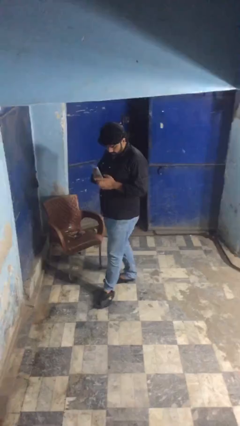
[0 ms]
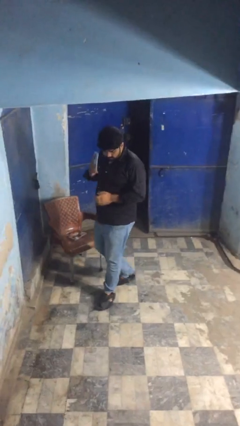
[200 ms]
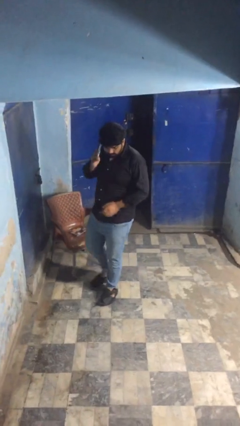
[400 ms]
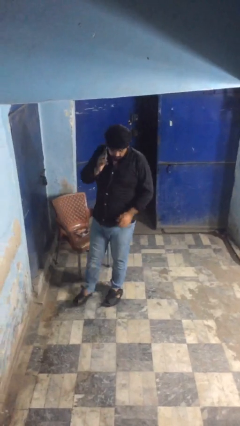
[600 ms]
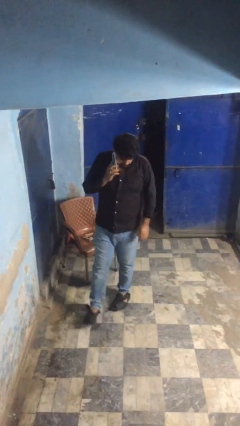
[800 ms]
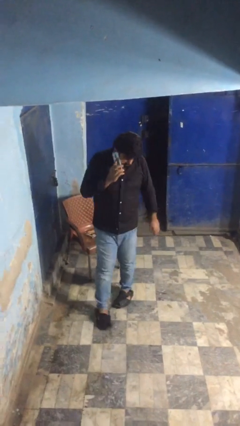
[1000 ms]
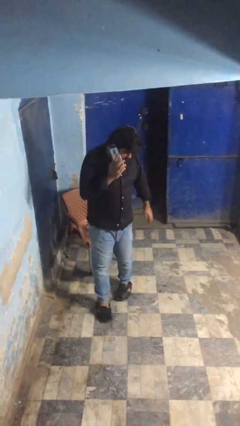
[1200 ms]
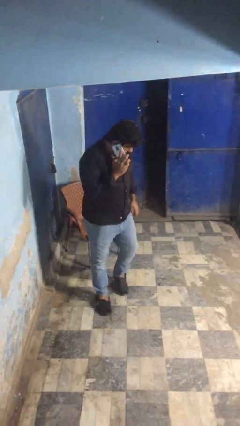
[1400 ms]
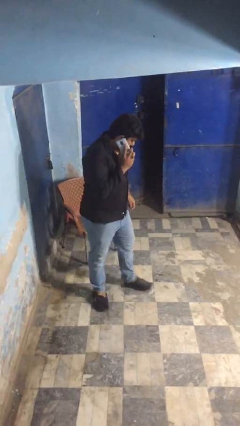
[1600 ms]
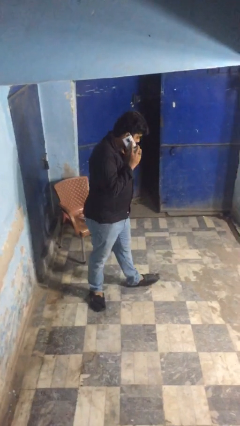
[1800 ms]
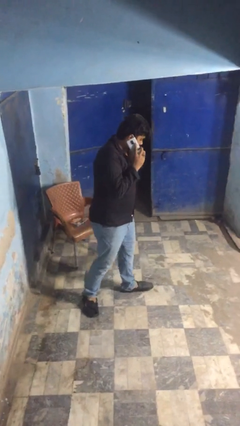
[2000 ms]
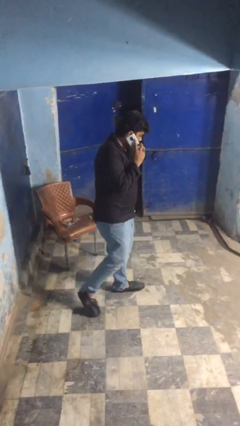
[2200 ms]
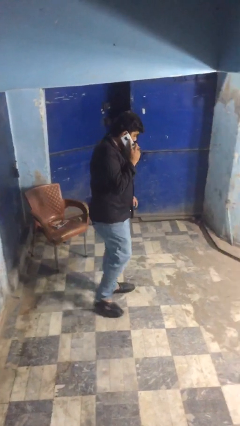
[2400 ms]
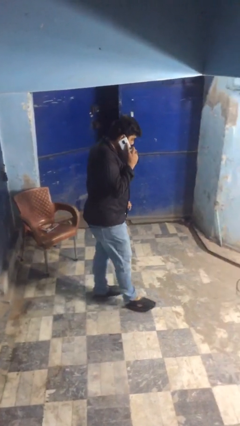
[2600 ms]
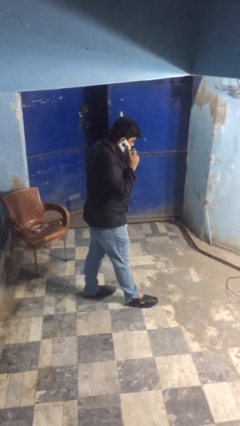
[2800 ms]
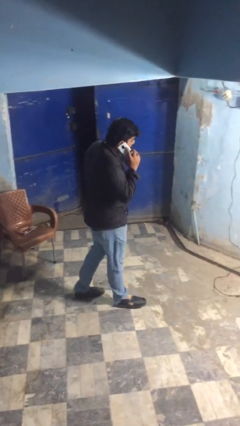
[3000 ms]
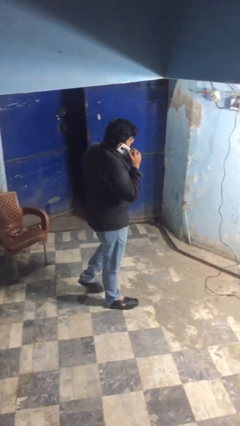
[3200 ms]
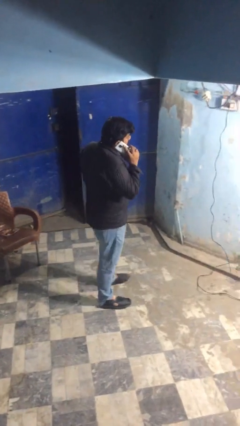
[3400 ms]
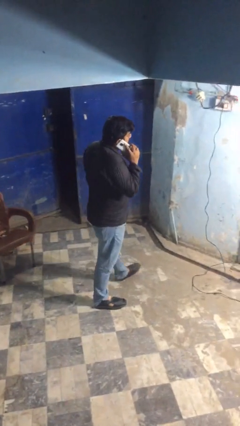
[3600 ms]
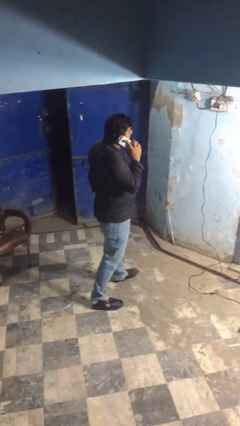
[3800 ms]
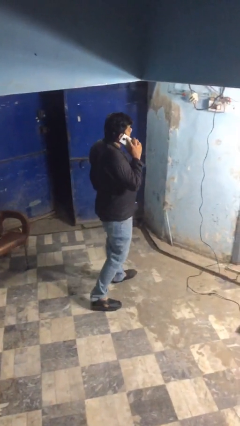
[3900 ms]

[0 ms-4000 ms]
person talks on phone

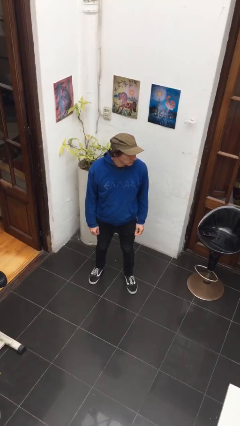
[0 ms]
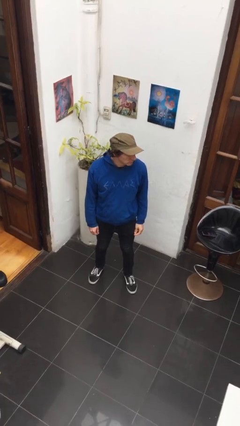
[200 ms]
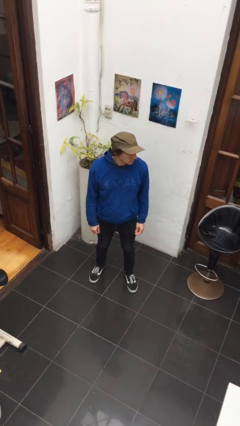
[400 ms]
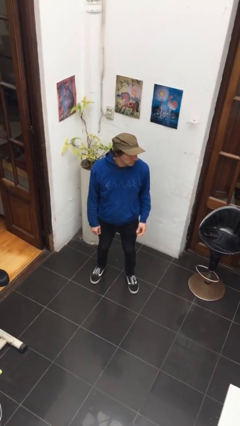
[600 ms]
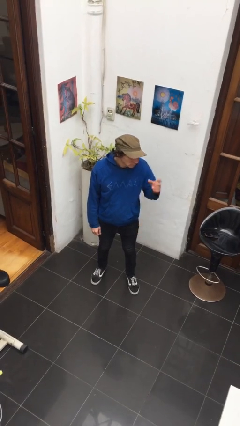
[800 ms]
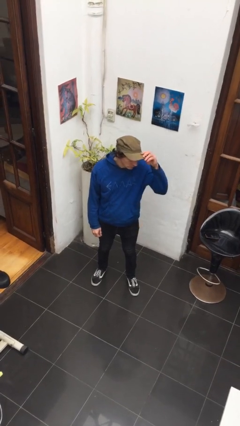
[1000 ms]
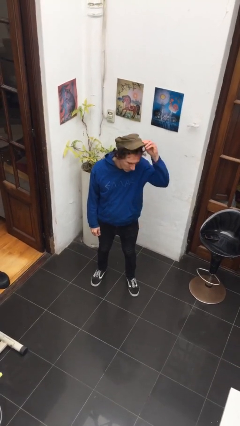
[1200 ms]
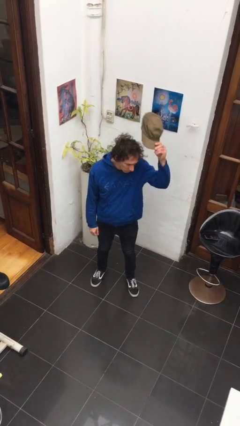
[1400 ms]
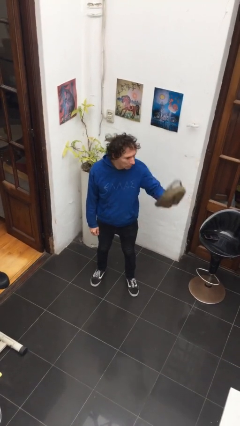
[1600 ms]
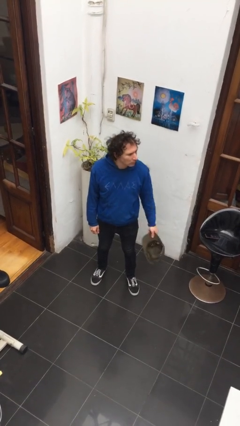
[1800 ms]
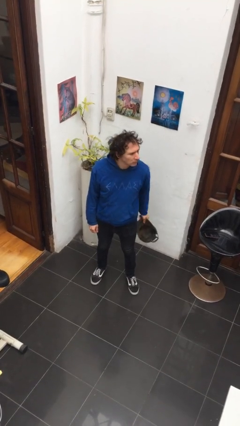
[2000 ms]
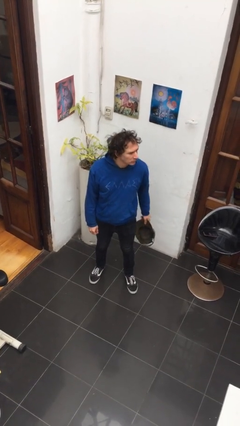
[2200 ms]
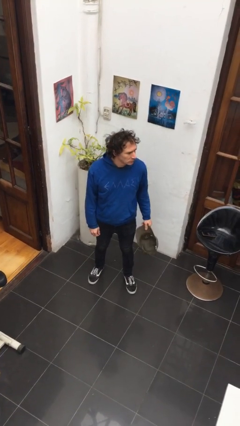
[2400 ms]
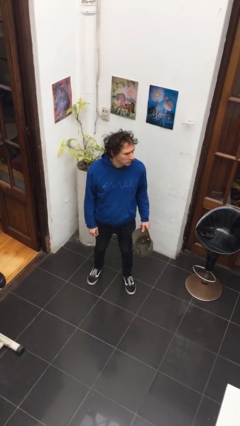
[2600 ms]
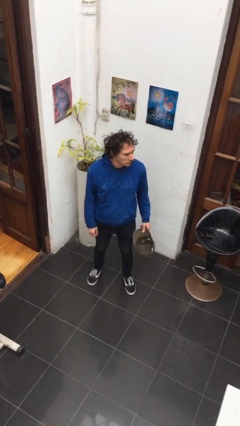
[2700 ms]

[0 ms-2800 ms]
person takes off hat

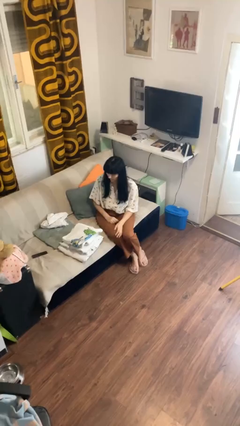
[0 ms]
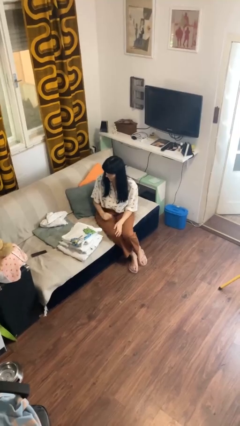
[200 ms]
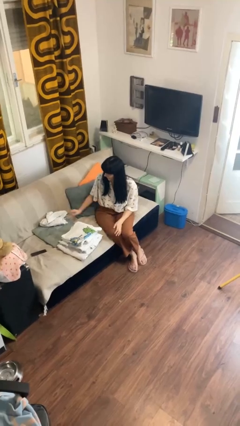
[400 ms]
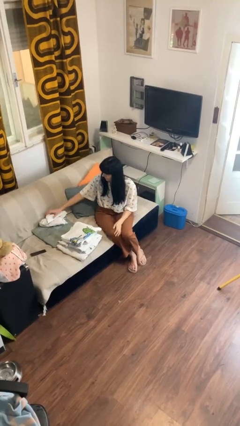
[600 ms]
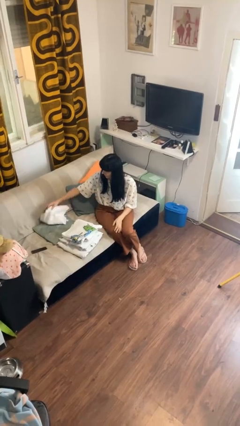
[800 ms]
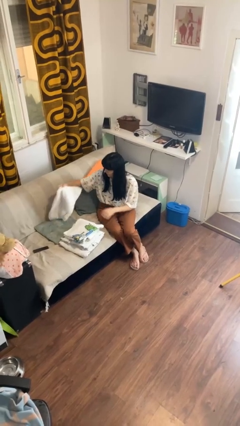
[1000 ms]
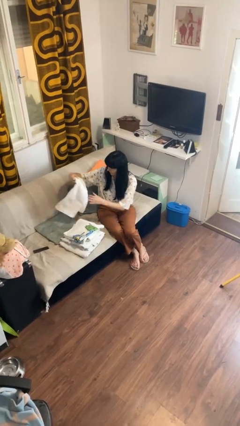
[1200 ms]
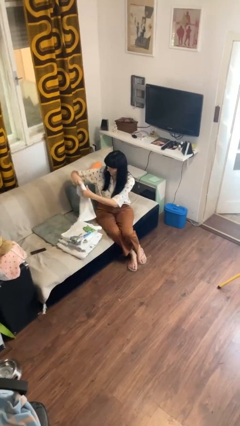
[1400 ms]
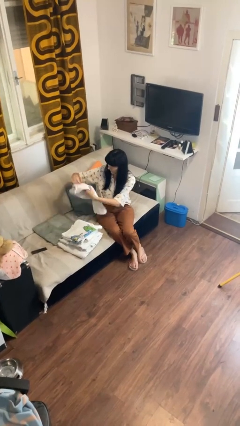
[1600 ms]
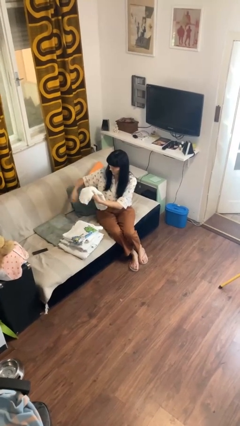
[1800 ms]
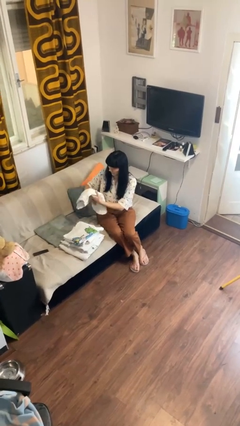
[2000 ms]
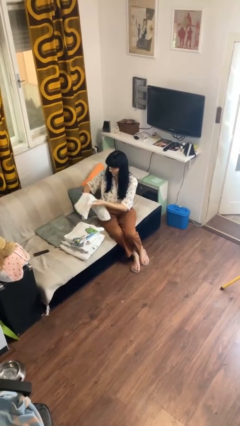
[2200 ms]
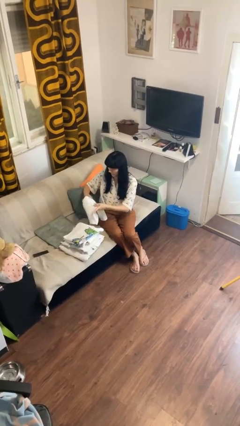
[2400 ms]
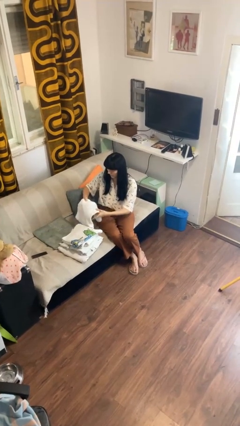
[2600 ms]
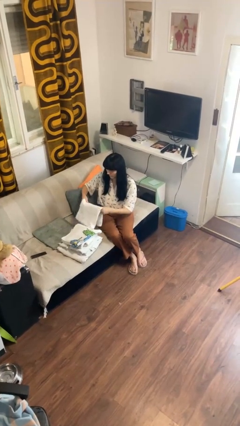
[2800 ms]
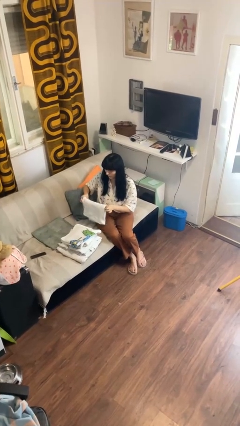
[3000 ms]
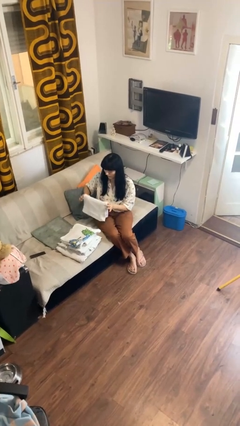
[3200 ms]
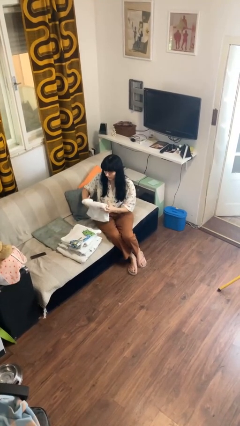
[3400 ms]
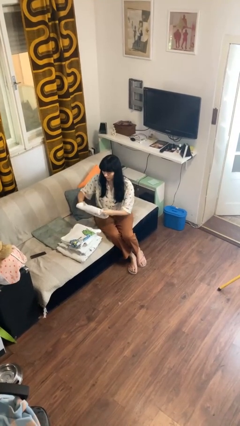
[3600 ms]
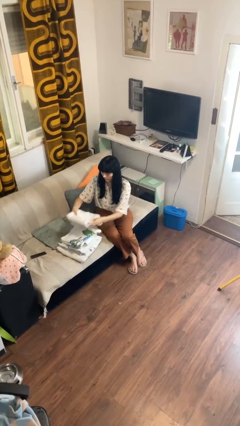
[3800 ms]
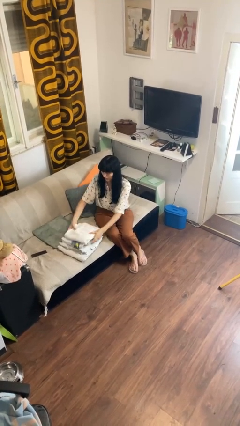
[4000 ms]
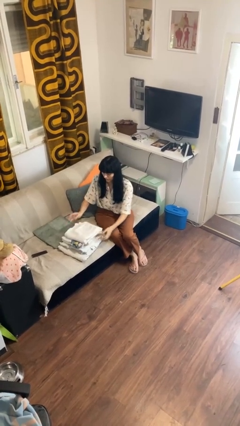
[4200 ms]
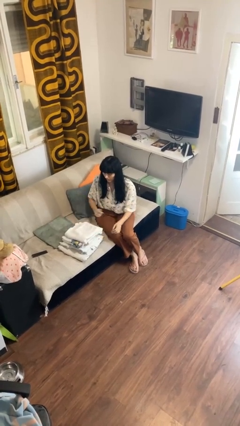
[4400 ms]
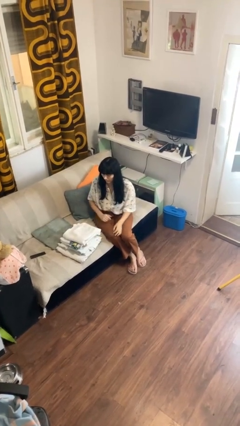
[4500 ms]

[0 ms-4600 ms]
person folds towel

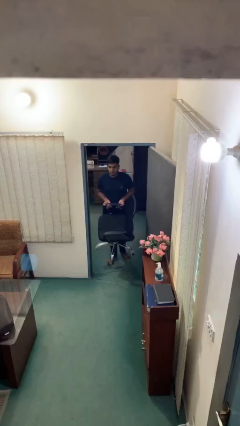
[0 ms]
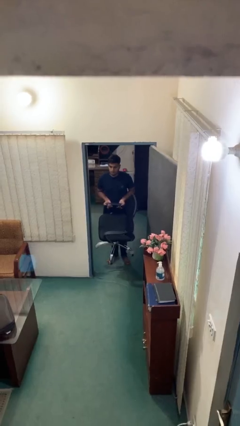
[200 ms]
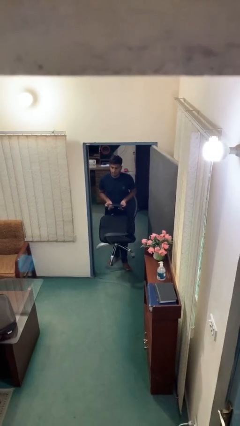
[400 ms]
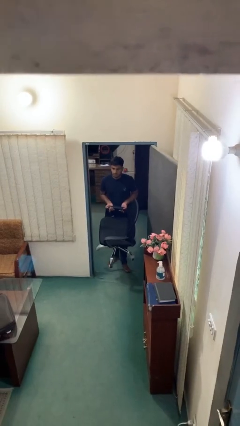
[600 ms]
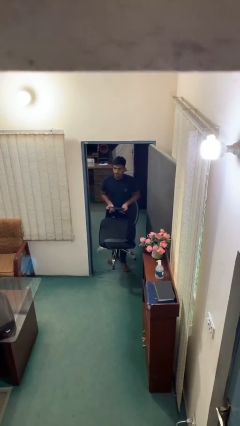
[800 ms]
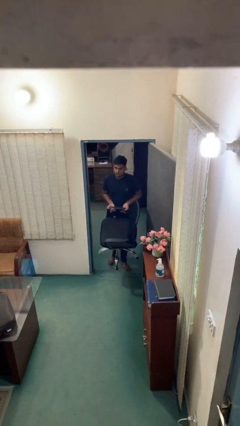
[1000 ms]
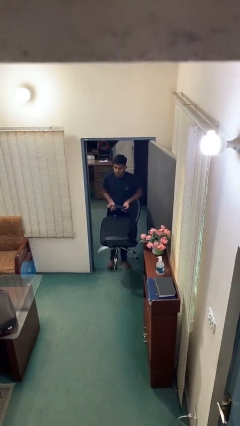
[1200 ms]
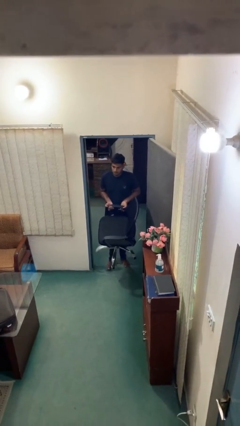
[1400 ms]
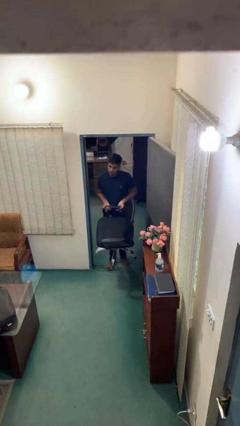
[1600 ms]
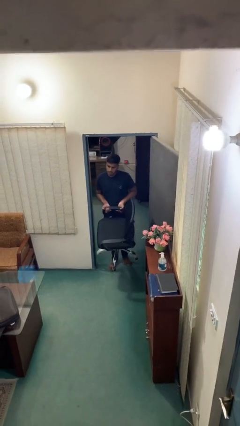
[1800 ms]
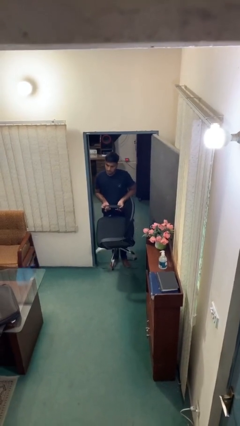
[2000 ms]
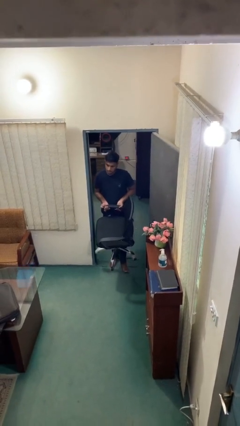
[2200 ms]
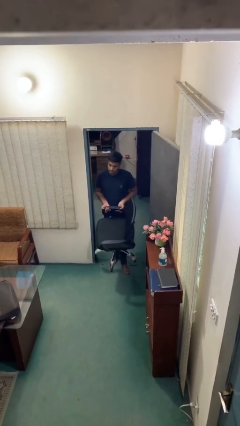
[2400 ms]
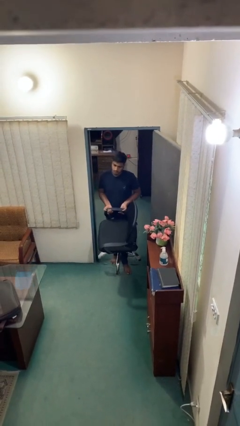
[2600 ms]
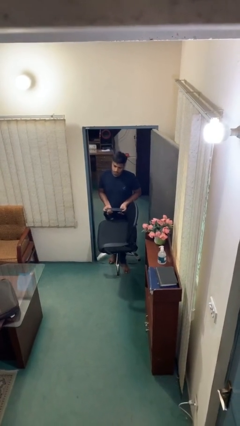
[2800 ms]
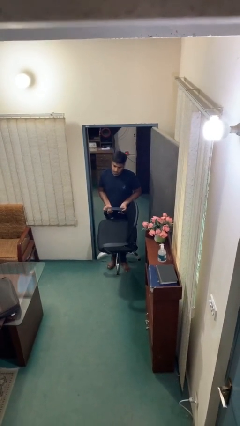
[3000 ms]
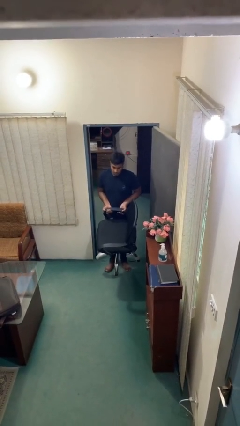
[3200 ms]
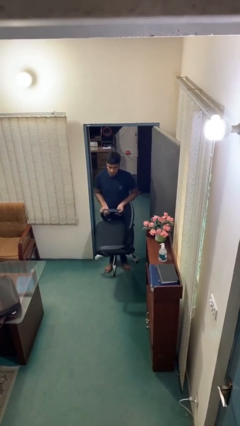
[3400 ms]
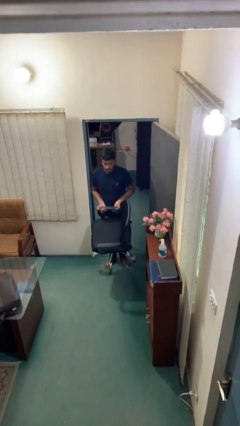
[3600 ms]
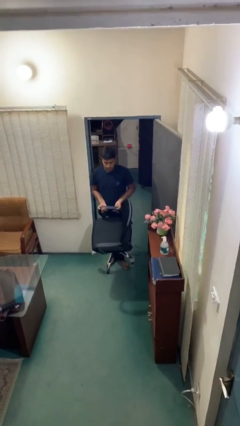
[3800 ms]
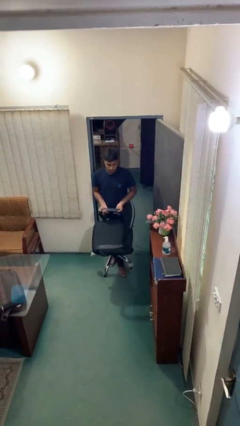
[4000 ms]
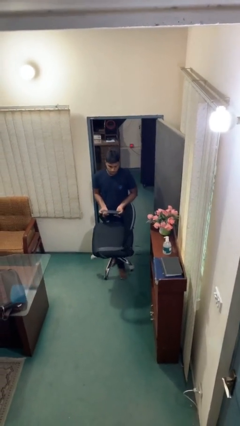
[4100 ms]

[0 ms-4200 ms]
person carries heavy object

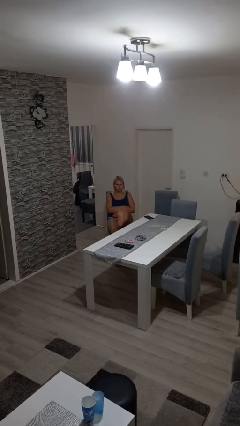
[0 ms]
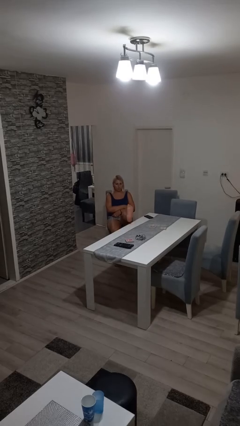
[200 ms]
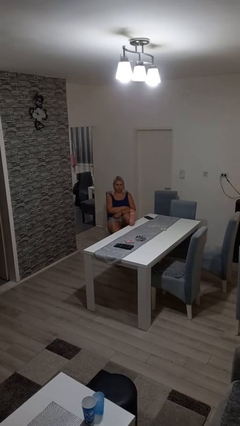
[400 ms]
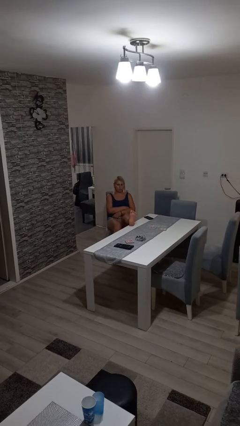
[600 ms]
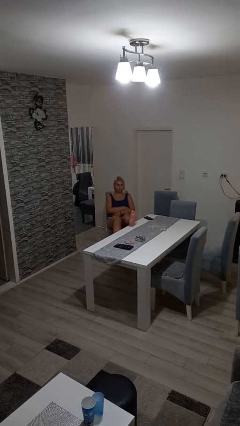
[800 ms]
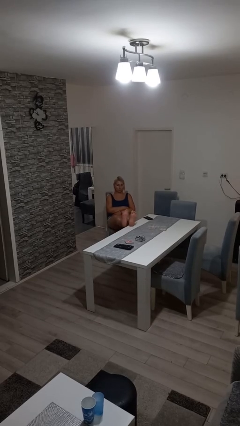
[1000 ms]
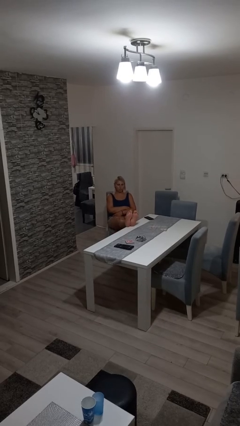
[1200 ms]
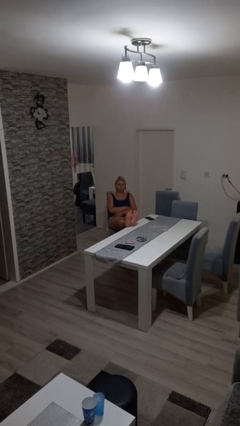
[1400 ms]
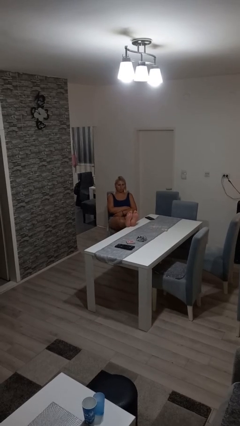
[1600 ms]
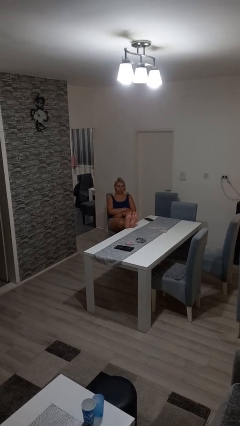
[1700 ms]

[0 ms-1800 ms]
person puts feet up

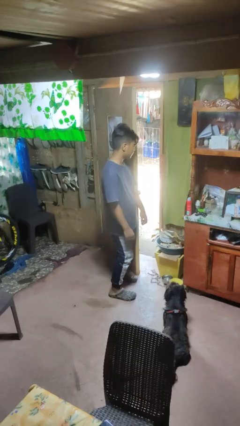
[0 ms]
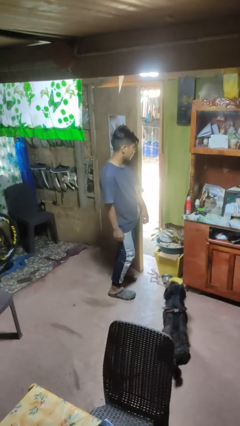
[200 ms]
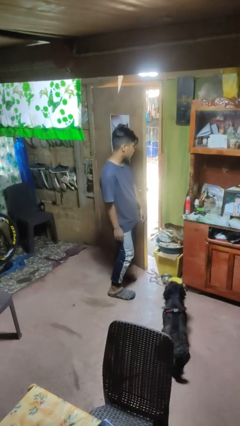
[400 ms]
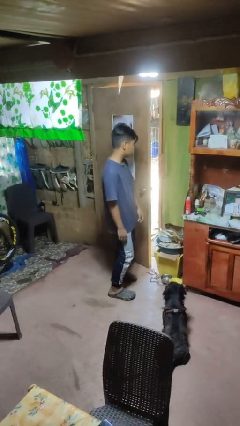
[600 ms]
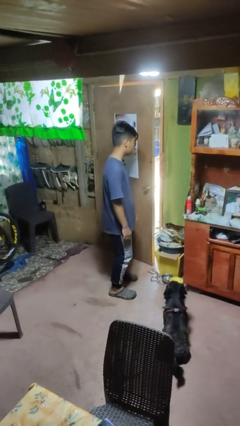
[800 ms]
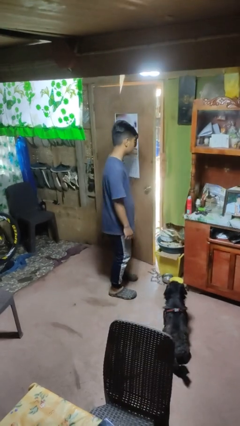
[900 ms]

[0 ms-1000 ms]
person closes door with hip
